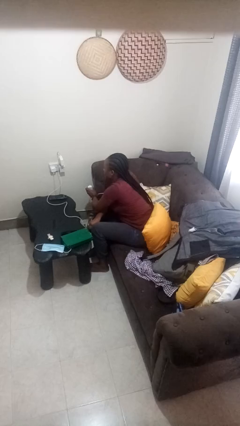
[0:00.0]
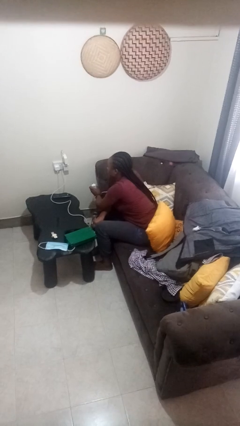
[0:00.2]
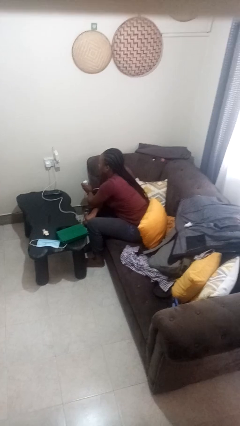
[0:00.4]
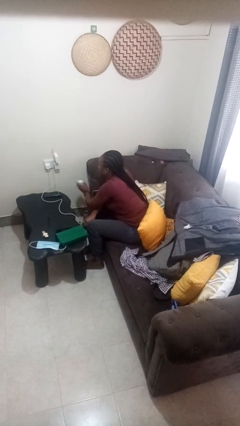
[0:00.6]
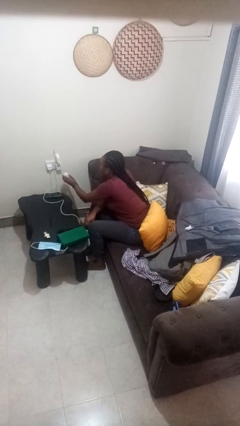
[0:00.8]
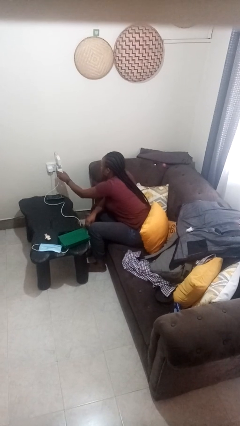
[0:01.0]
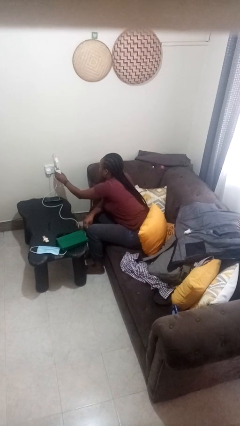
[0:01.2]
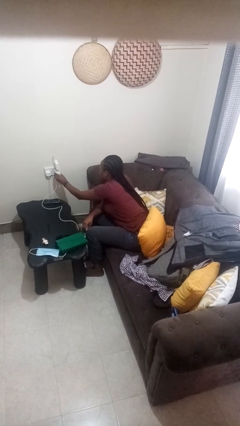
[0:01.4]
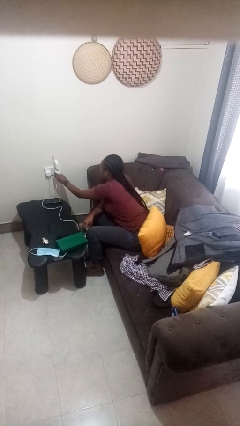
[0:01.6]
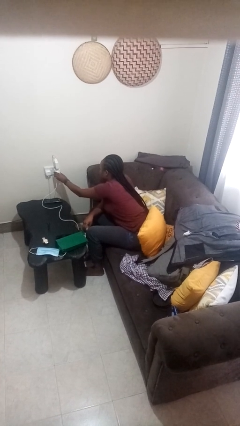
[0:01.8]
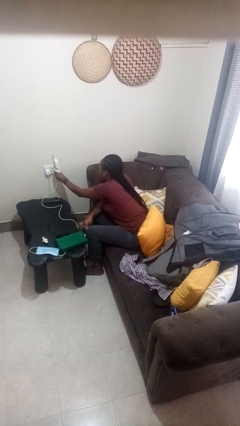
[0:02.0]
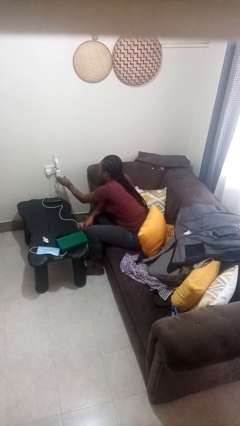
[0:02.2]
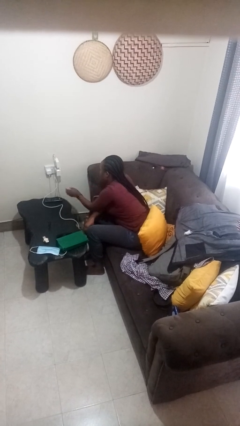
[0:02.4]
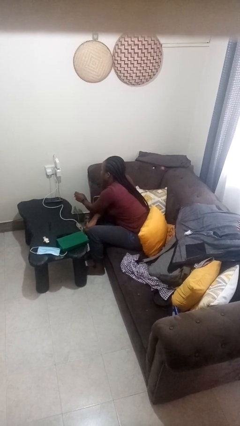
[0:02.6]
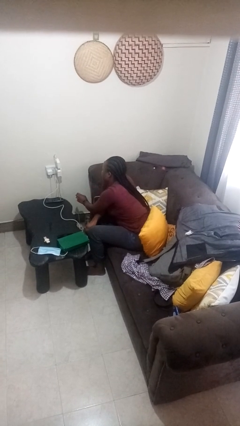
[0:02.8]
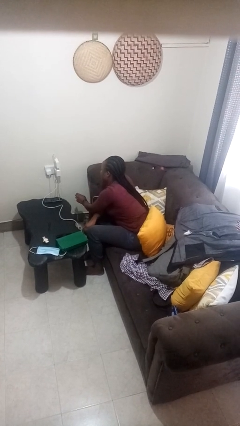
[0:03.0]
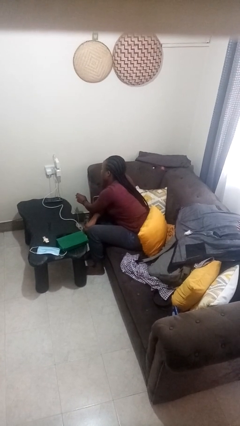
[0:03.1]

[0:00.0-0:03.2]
person plugs into electrical socket

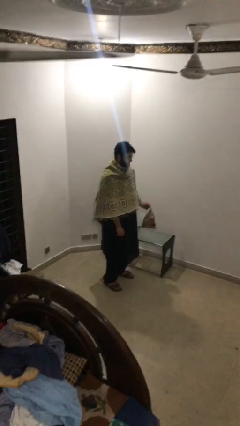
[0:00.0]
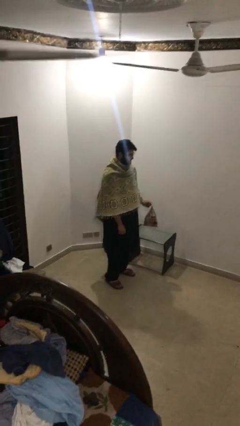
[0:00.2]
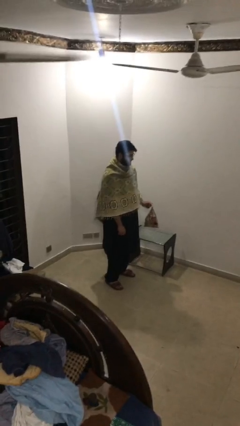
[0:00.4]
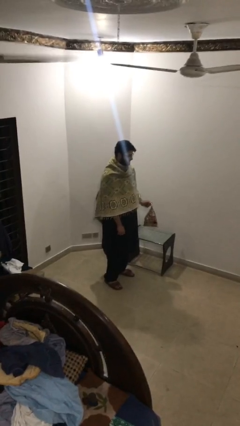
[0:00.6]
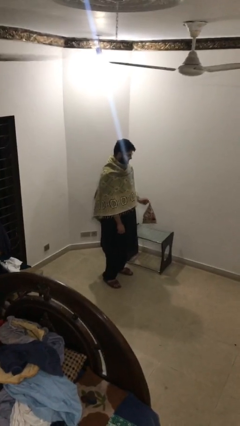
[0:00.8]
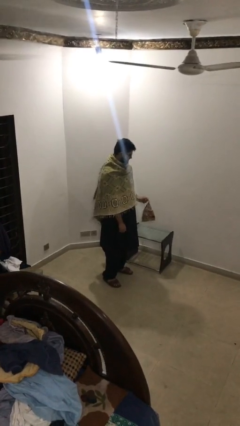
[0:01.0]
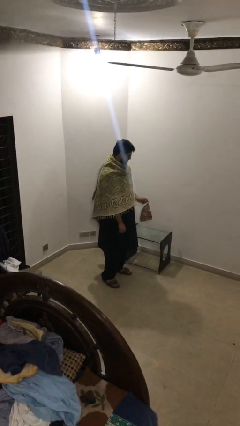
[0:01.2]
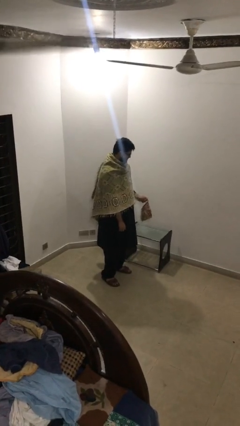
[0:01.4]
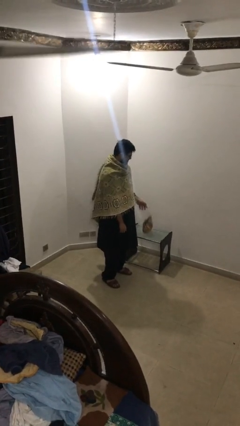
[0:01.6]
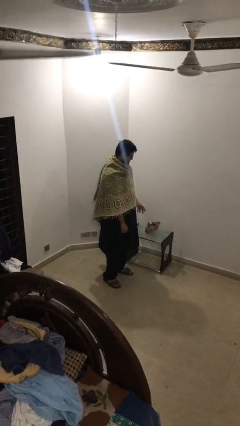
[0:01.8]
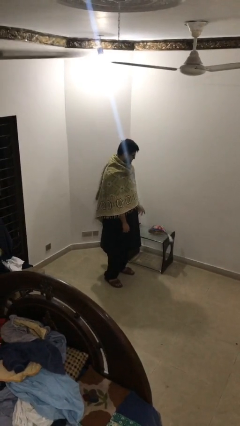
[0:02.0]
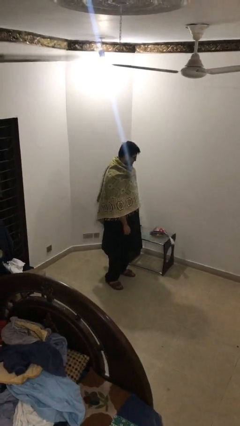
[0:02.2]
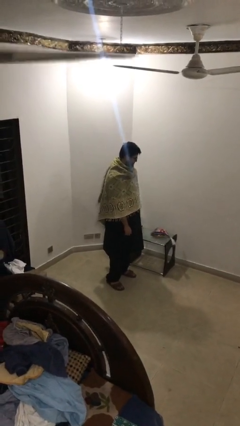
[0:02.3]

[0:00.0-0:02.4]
person puts down object on table

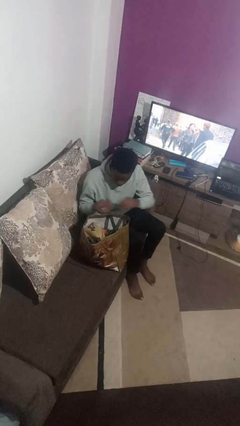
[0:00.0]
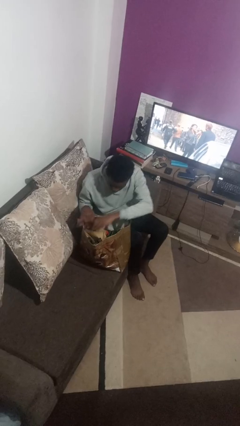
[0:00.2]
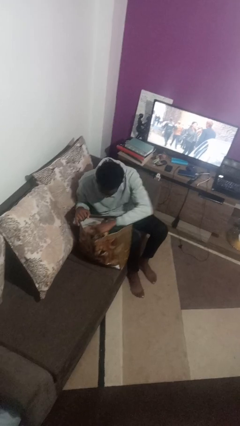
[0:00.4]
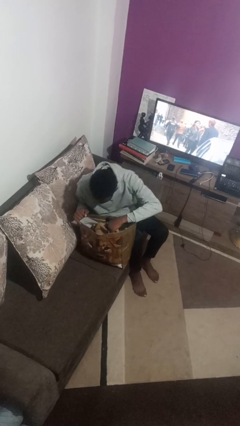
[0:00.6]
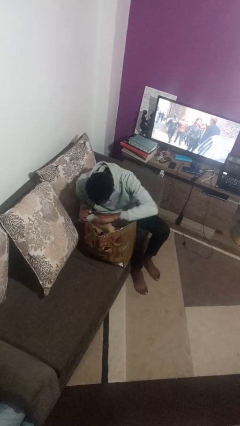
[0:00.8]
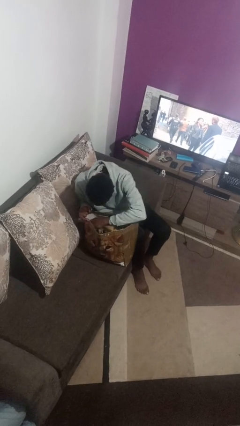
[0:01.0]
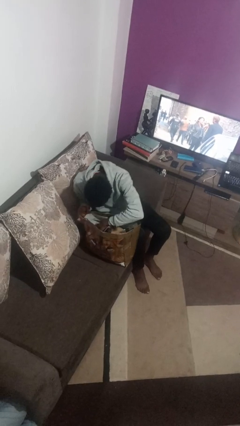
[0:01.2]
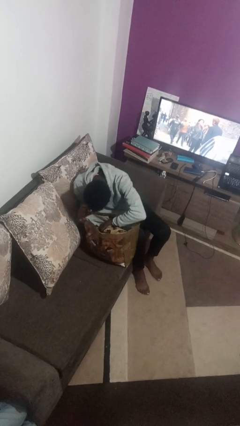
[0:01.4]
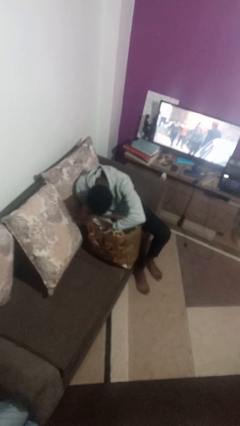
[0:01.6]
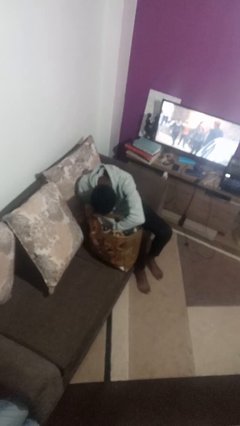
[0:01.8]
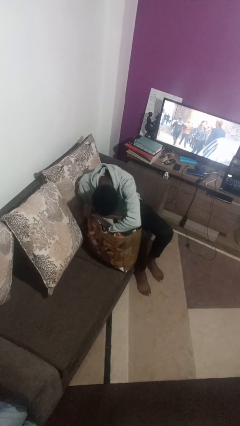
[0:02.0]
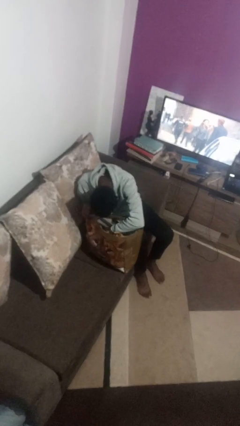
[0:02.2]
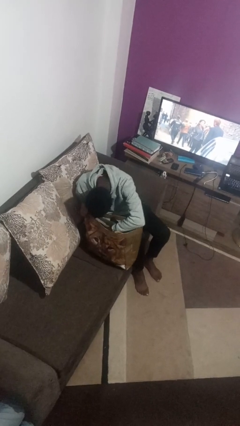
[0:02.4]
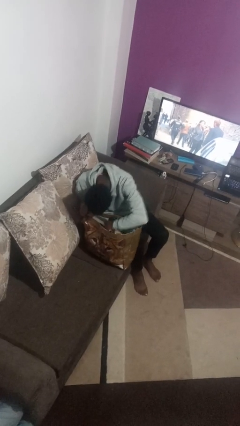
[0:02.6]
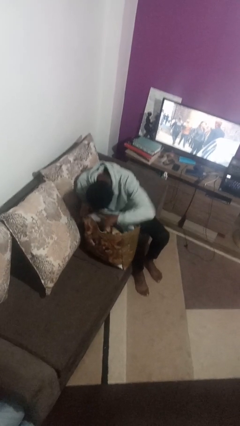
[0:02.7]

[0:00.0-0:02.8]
person searches in bag

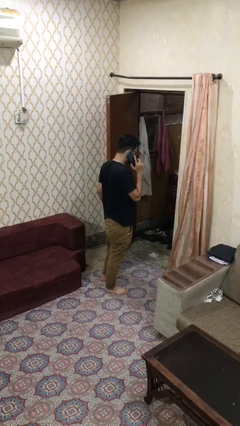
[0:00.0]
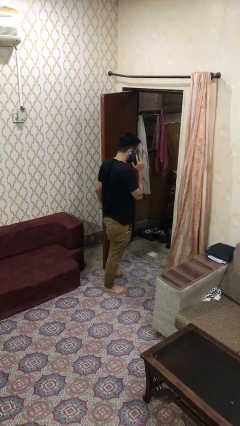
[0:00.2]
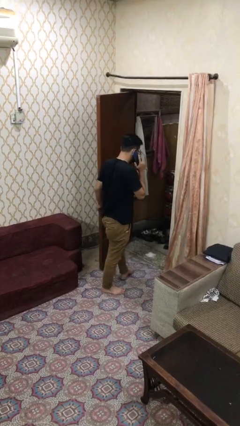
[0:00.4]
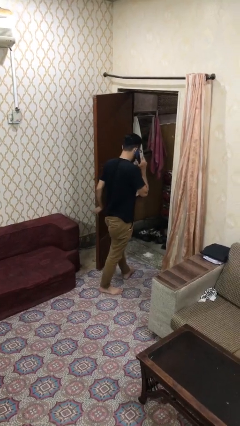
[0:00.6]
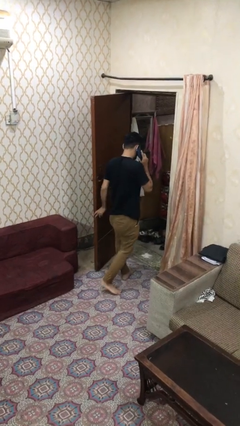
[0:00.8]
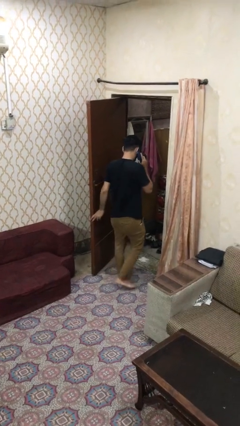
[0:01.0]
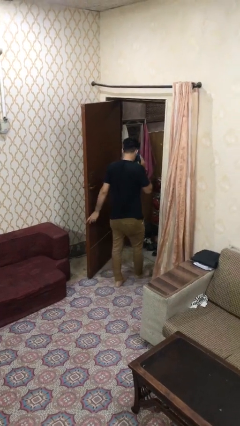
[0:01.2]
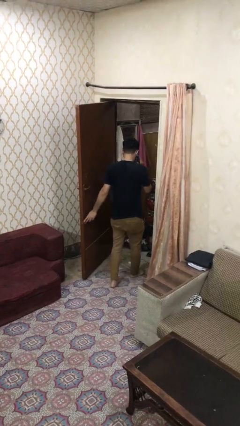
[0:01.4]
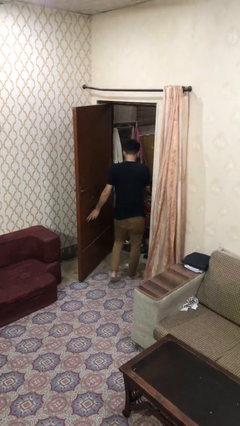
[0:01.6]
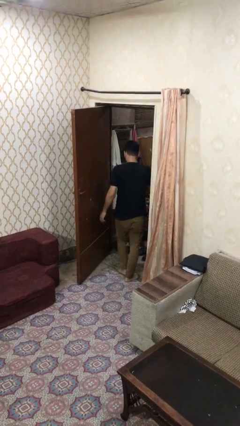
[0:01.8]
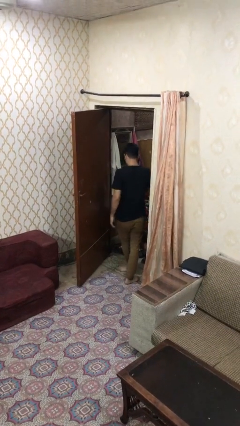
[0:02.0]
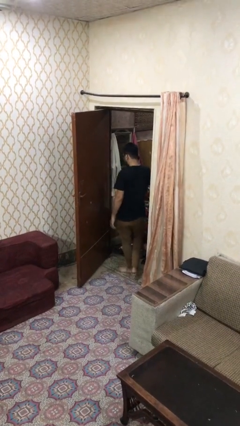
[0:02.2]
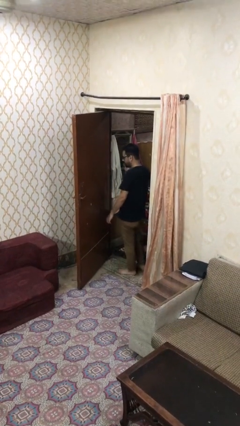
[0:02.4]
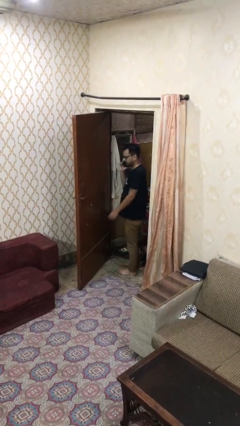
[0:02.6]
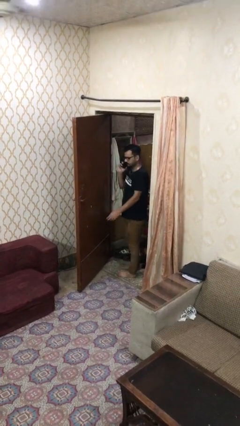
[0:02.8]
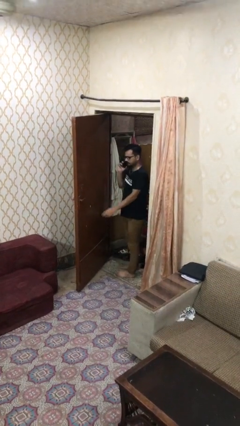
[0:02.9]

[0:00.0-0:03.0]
person exits scene through structure

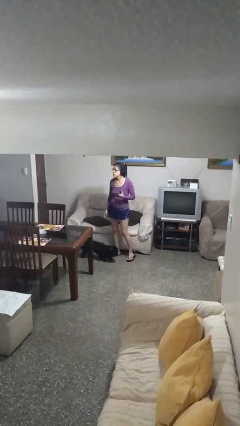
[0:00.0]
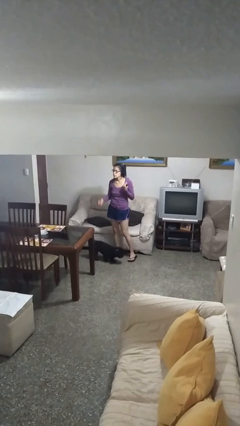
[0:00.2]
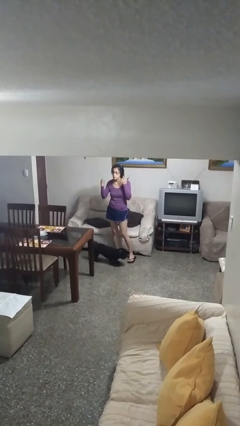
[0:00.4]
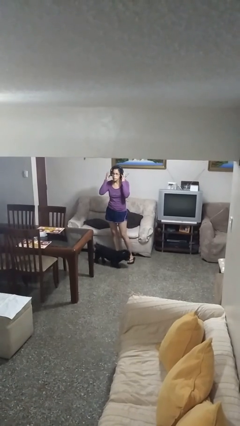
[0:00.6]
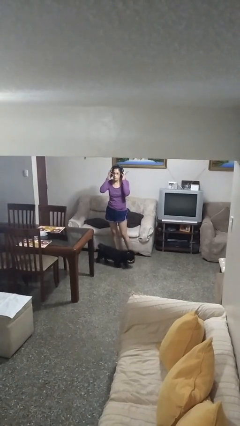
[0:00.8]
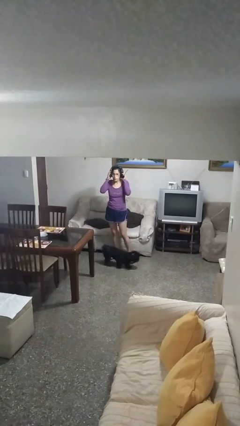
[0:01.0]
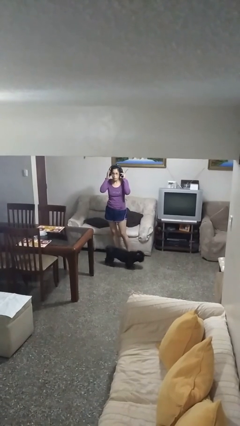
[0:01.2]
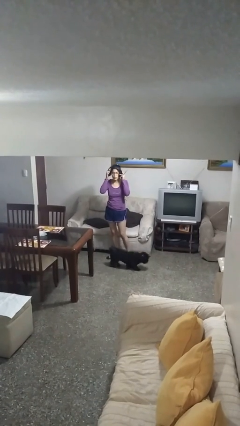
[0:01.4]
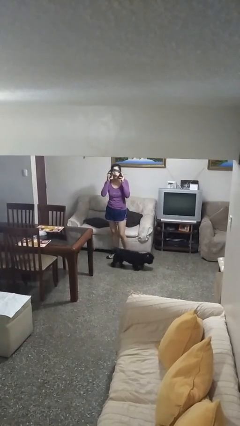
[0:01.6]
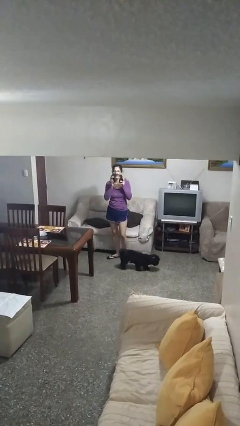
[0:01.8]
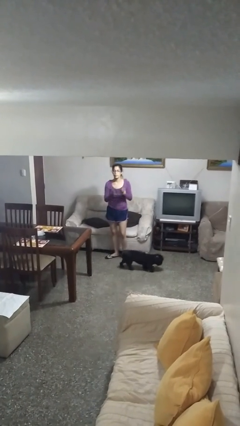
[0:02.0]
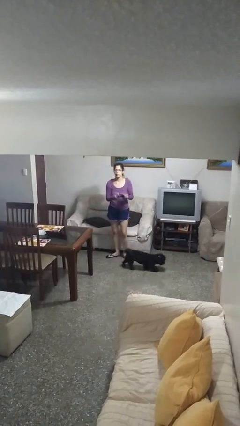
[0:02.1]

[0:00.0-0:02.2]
person takes off headphones

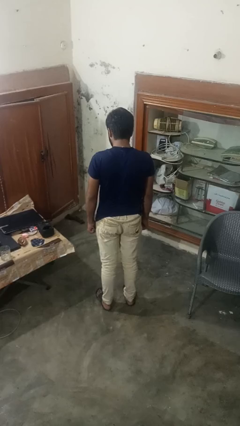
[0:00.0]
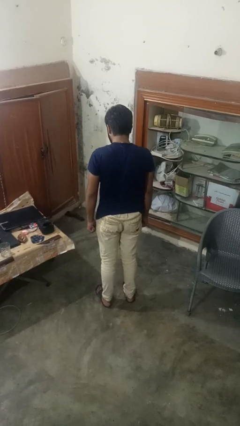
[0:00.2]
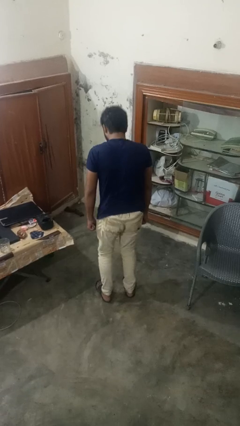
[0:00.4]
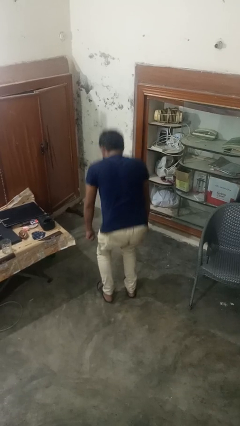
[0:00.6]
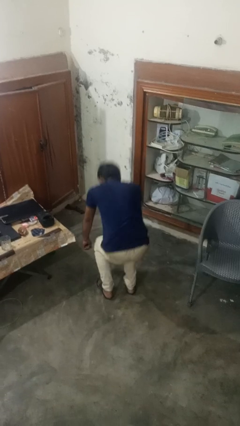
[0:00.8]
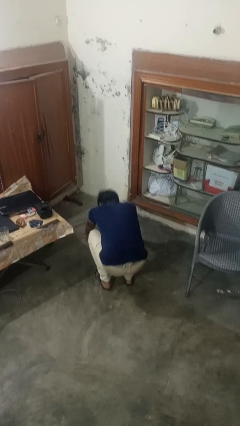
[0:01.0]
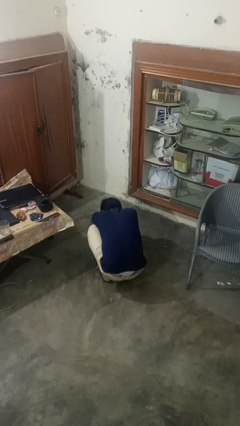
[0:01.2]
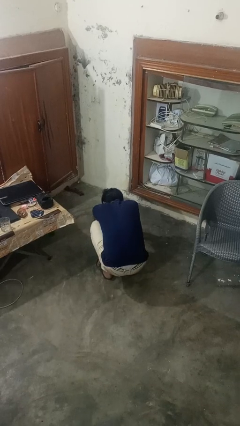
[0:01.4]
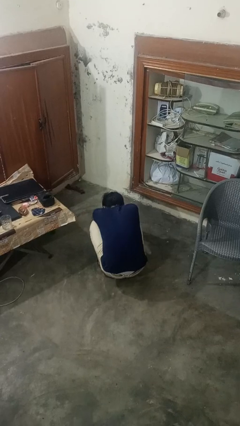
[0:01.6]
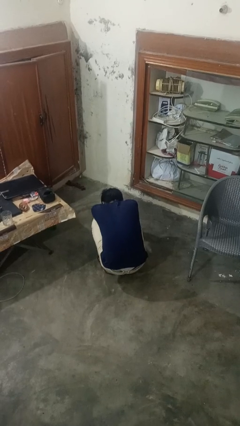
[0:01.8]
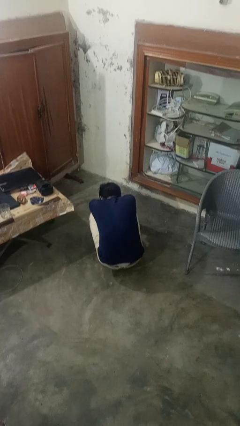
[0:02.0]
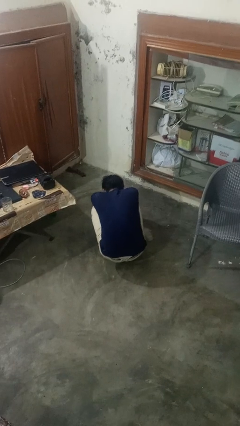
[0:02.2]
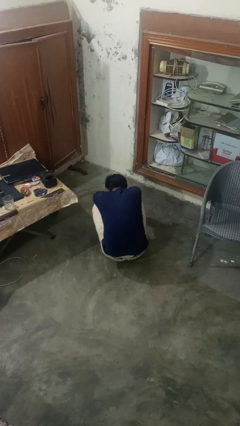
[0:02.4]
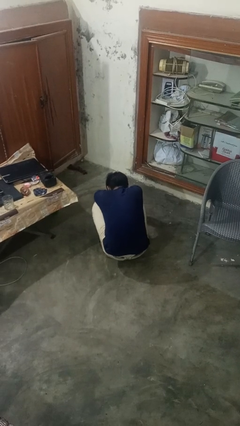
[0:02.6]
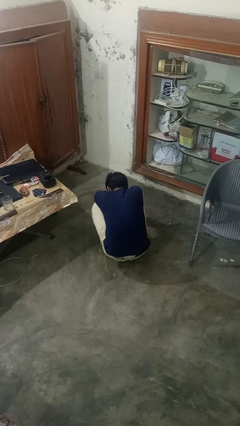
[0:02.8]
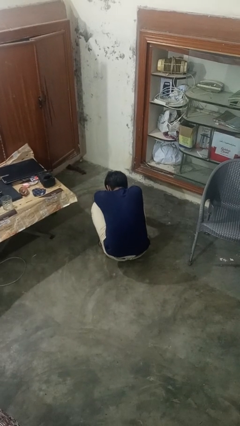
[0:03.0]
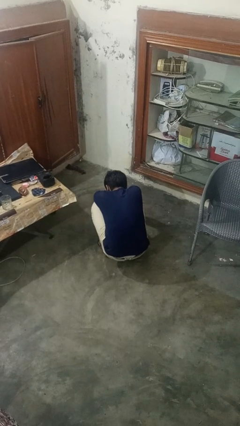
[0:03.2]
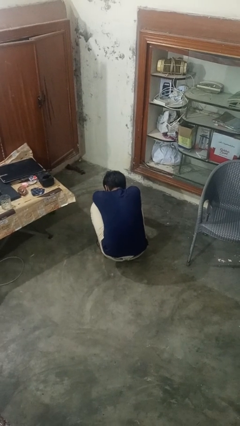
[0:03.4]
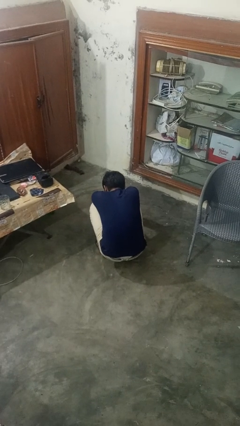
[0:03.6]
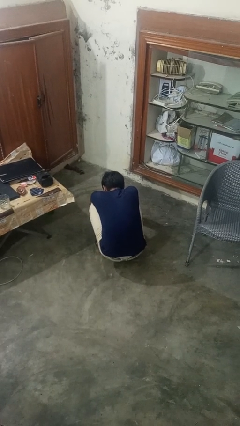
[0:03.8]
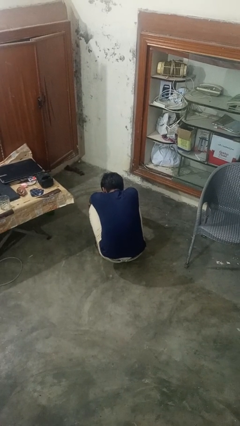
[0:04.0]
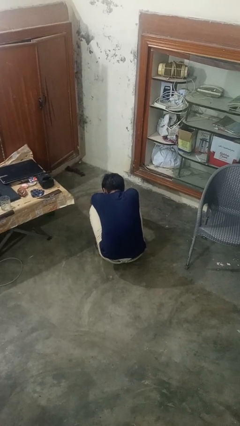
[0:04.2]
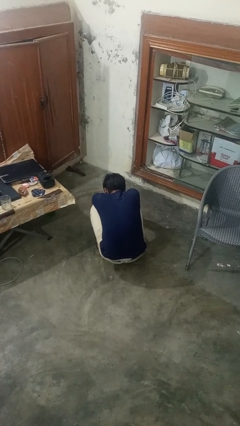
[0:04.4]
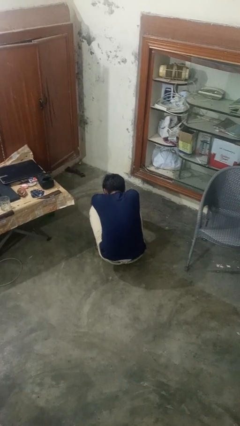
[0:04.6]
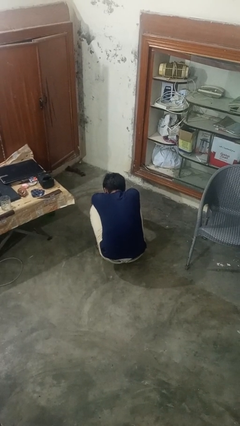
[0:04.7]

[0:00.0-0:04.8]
person squats
